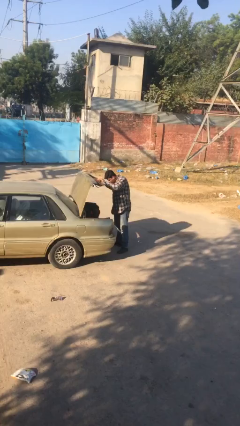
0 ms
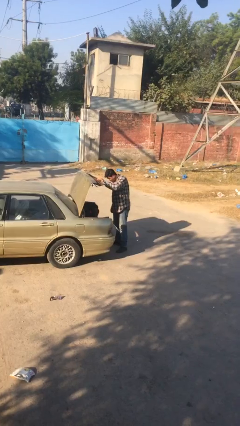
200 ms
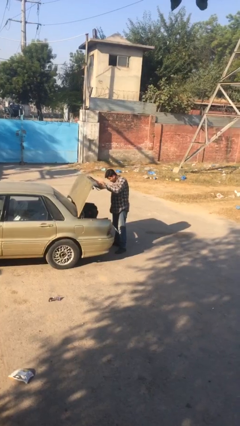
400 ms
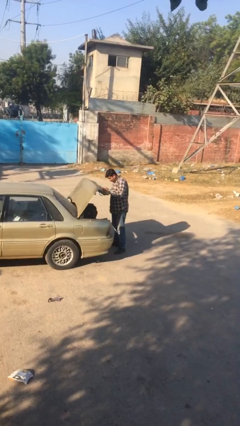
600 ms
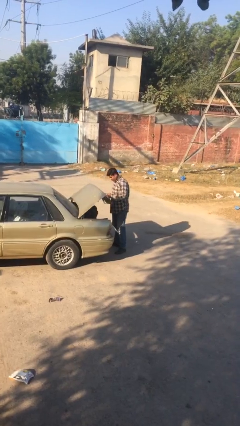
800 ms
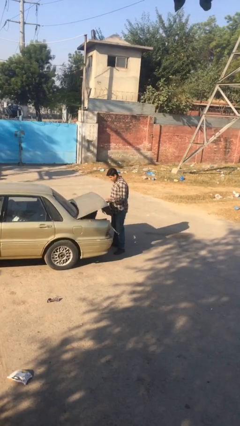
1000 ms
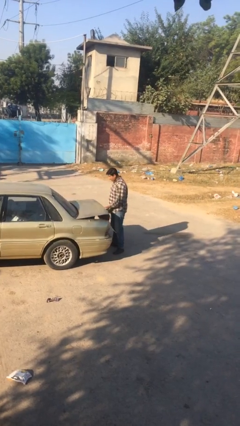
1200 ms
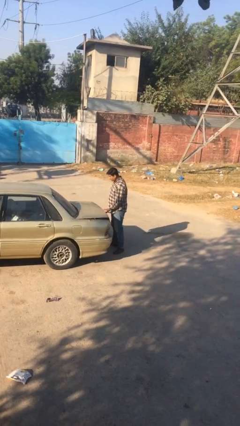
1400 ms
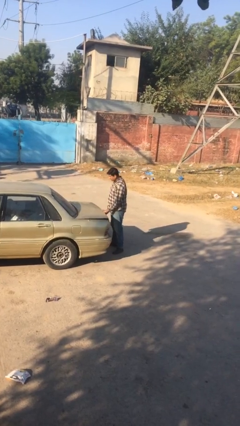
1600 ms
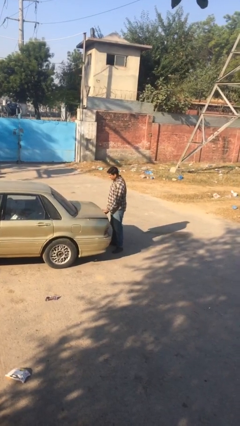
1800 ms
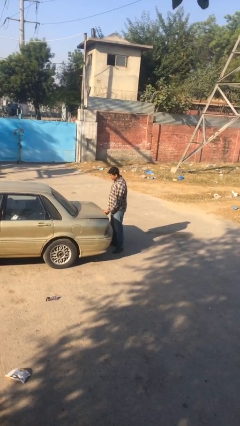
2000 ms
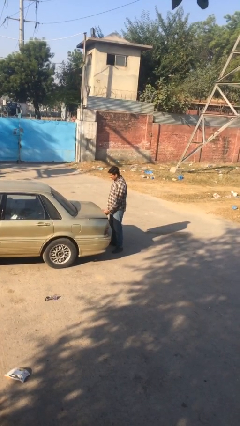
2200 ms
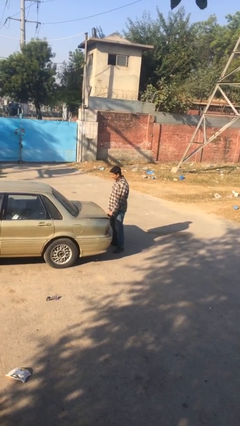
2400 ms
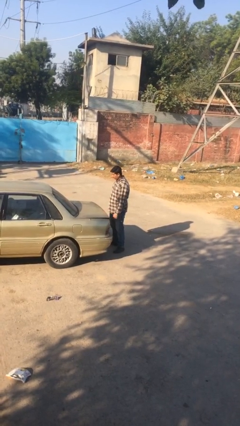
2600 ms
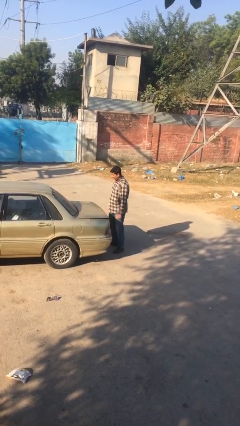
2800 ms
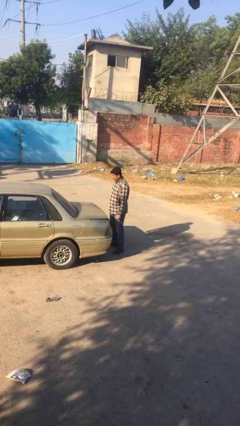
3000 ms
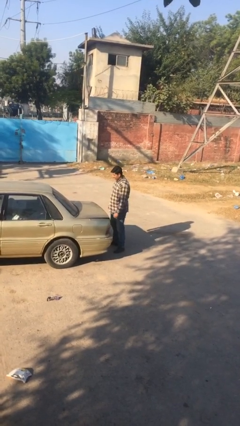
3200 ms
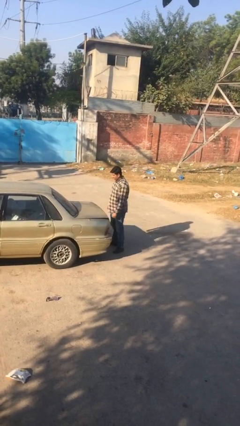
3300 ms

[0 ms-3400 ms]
person closes car trunk

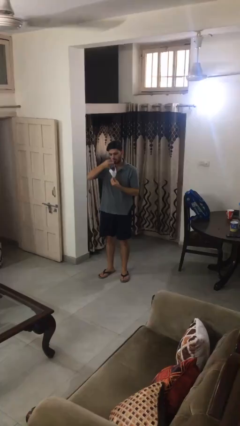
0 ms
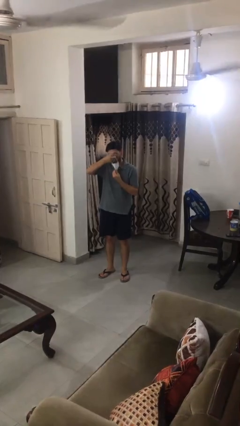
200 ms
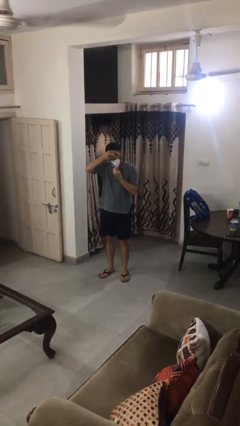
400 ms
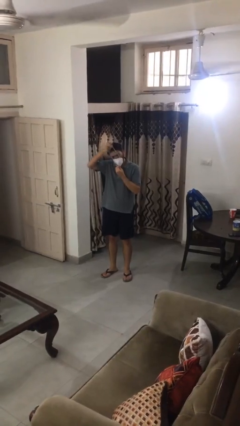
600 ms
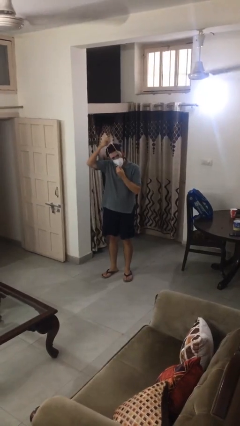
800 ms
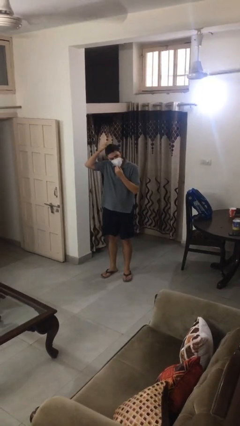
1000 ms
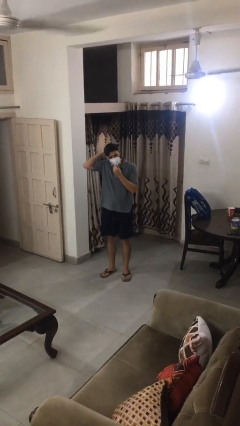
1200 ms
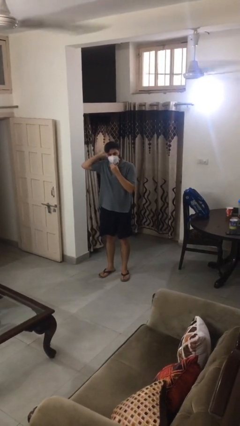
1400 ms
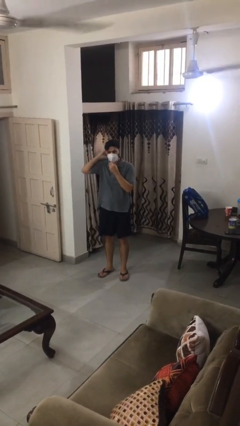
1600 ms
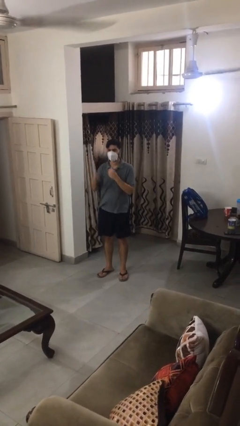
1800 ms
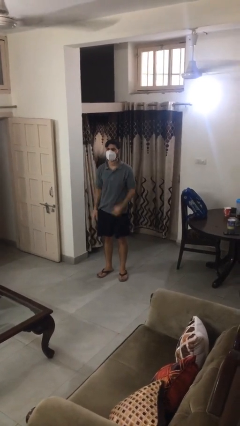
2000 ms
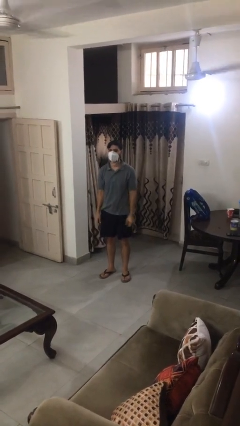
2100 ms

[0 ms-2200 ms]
person puts on facemask

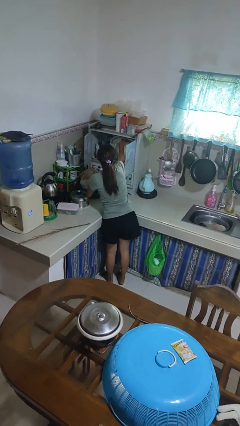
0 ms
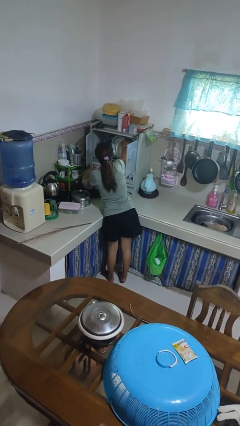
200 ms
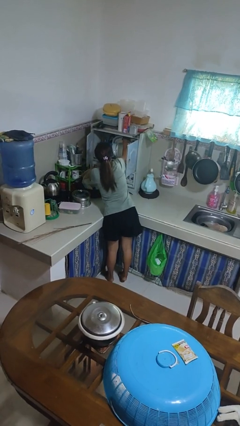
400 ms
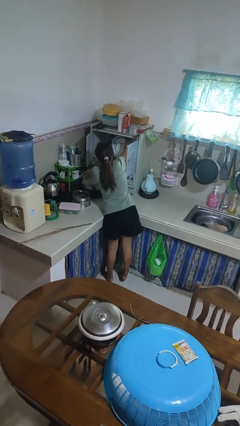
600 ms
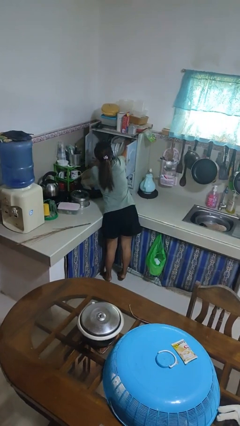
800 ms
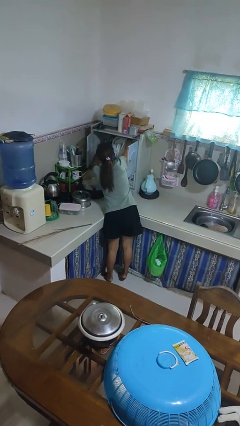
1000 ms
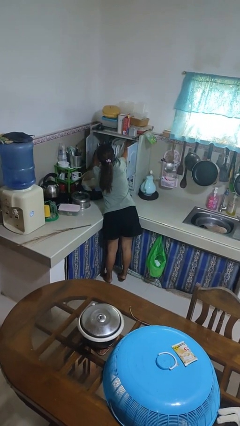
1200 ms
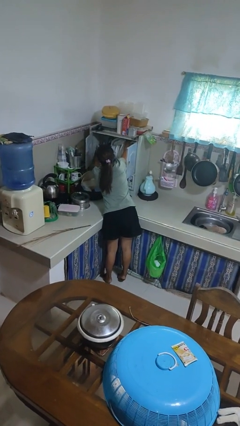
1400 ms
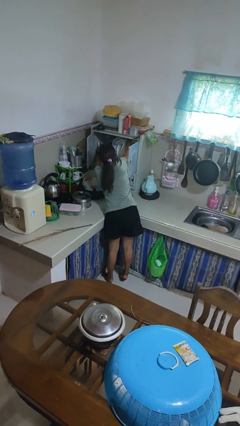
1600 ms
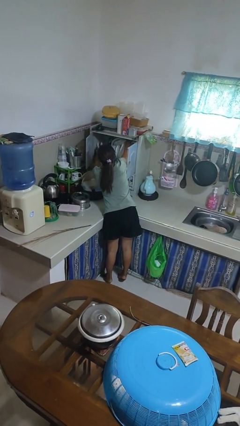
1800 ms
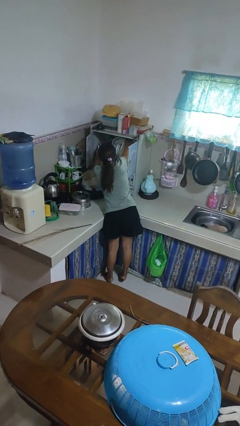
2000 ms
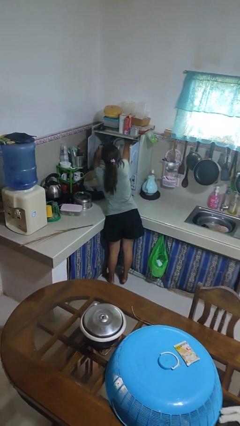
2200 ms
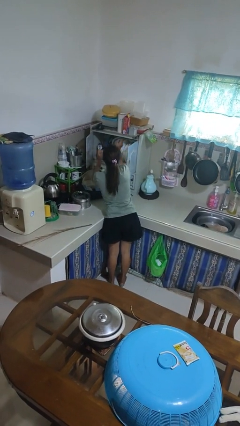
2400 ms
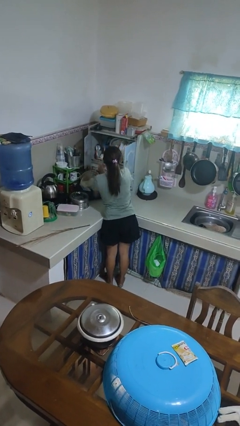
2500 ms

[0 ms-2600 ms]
person searches in kitchen drawer

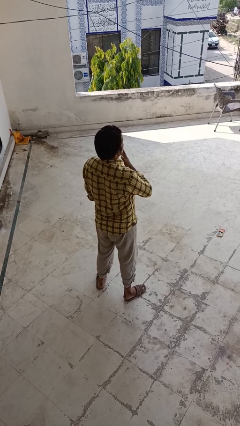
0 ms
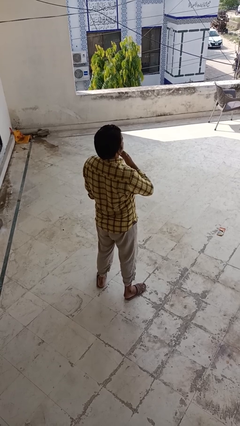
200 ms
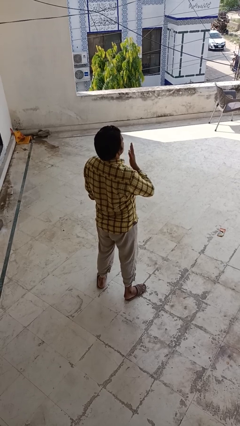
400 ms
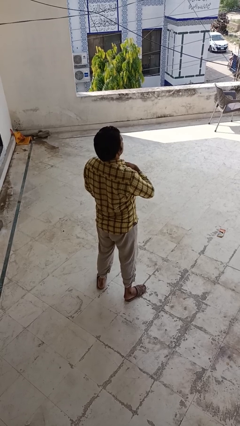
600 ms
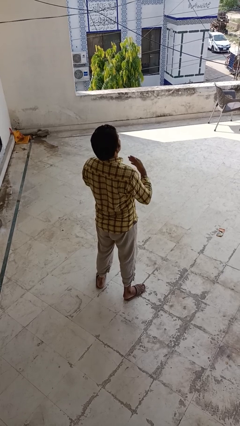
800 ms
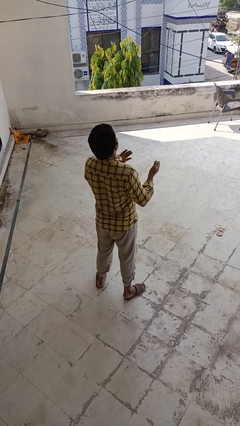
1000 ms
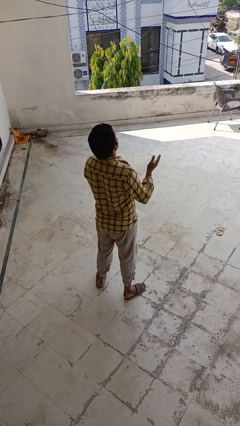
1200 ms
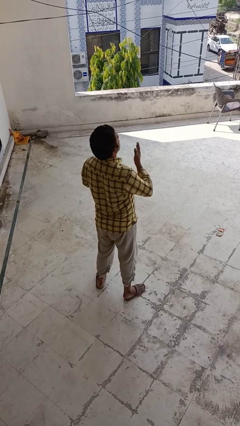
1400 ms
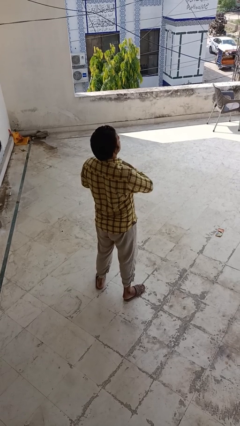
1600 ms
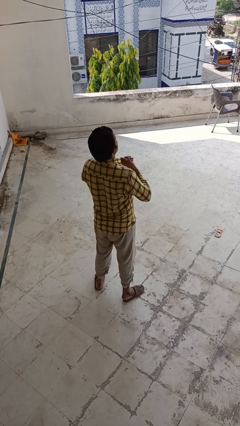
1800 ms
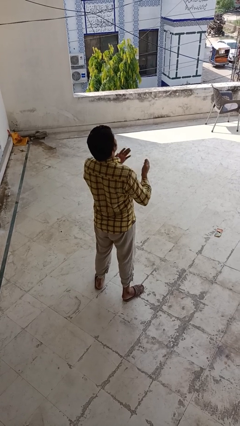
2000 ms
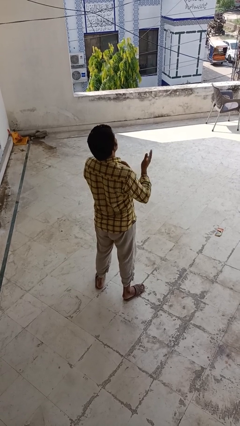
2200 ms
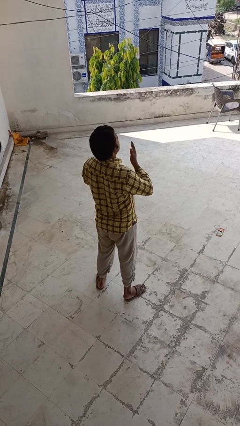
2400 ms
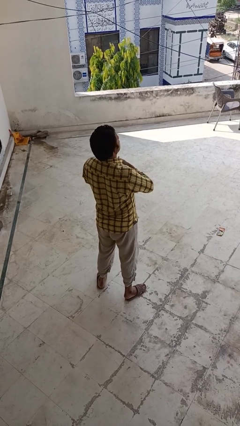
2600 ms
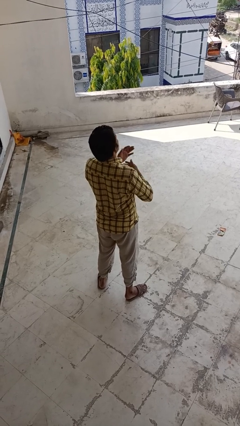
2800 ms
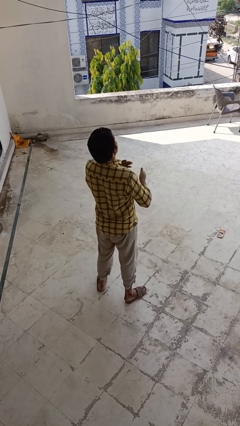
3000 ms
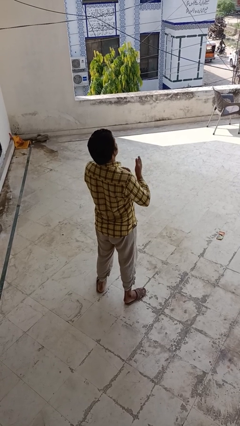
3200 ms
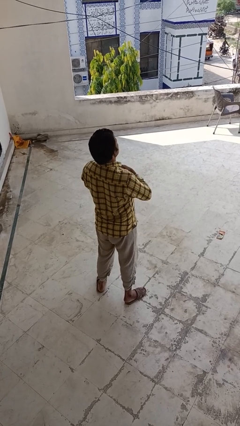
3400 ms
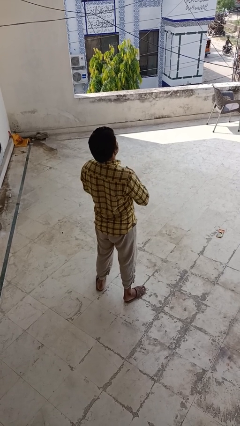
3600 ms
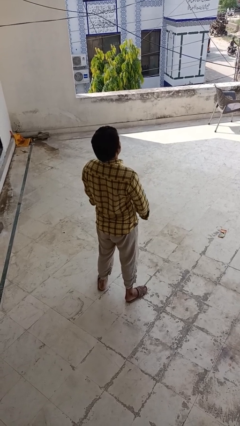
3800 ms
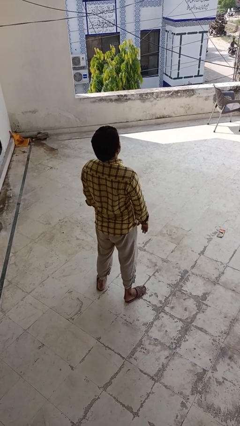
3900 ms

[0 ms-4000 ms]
person drums on chest

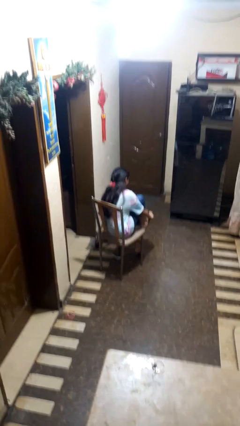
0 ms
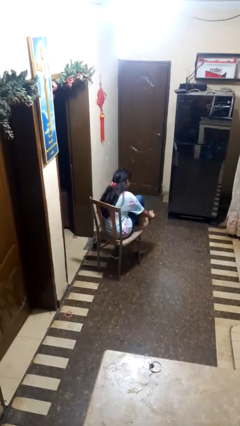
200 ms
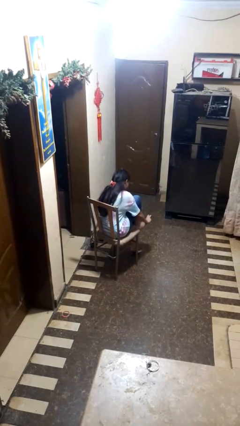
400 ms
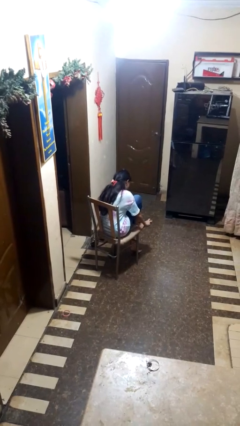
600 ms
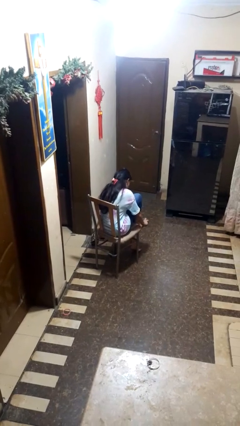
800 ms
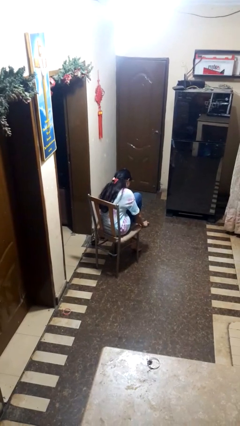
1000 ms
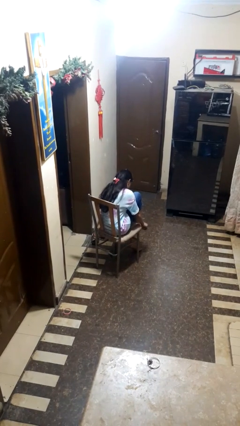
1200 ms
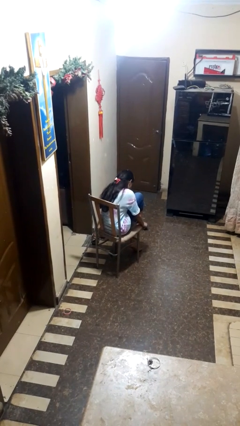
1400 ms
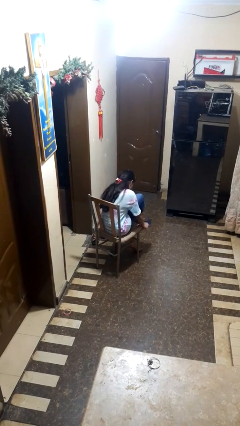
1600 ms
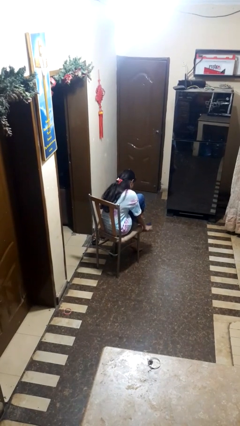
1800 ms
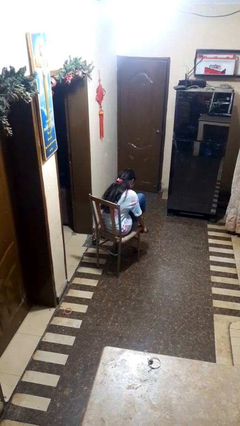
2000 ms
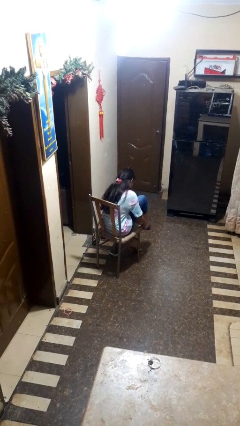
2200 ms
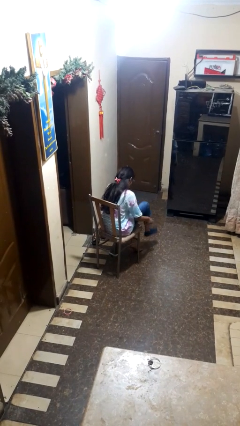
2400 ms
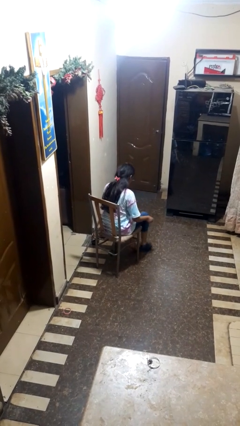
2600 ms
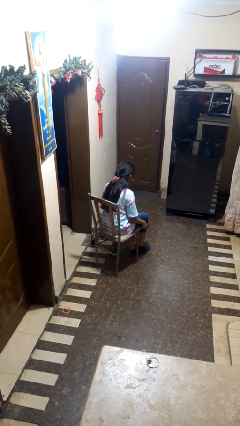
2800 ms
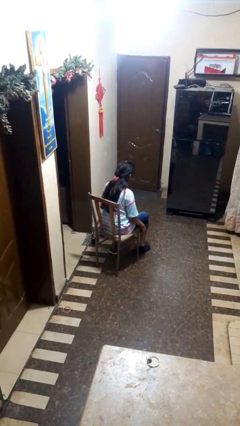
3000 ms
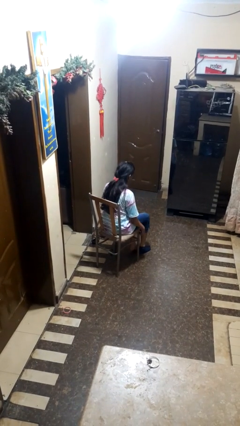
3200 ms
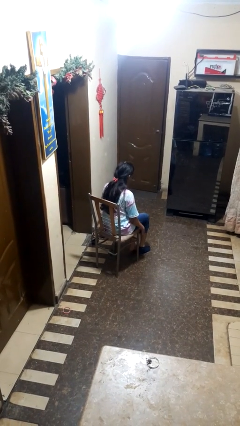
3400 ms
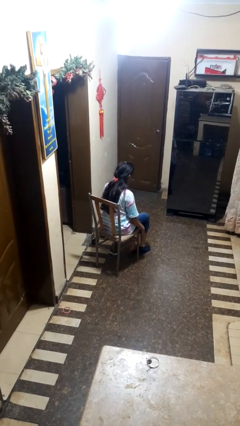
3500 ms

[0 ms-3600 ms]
person puts on socks

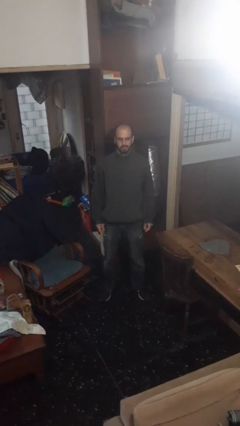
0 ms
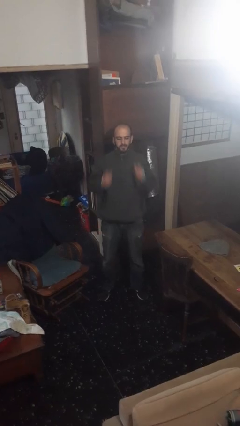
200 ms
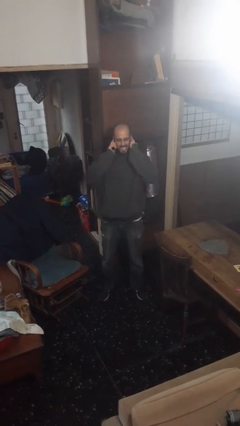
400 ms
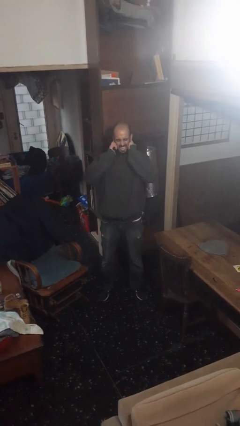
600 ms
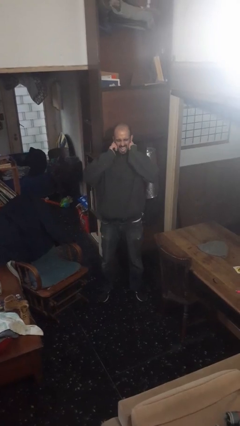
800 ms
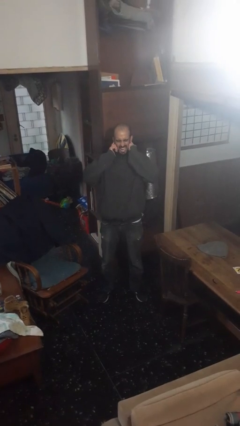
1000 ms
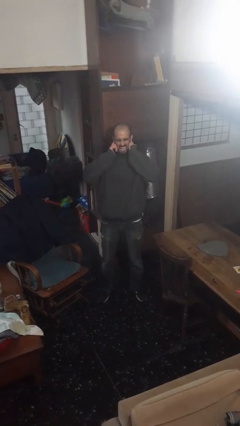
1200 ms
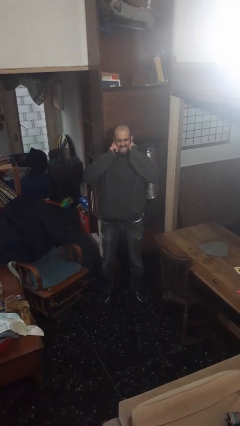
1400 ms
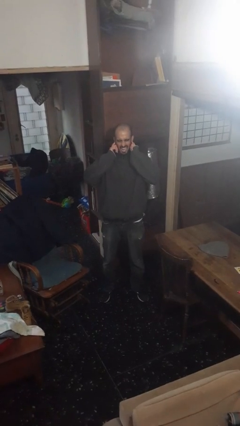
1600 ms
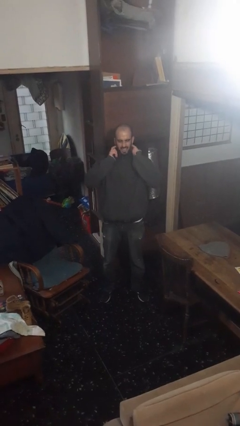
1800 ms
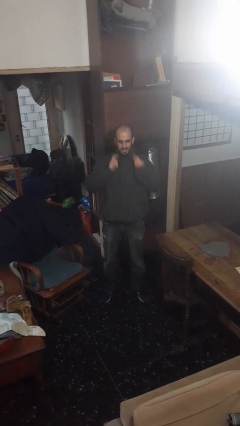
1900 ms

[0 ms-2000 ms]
person puts fingers in ear
